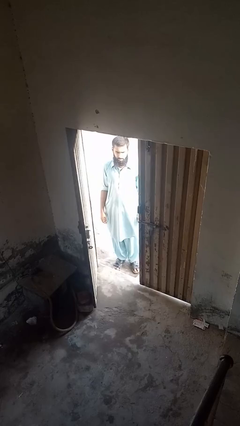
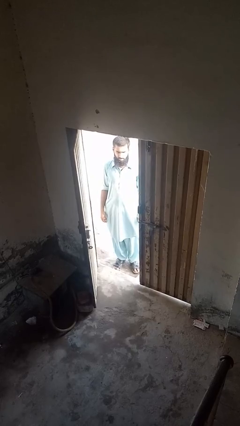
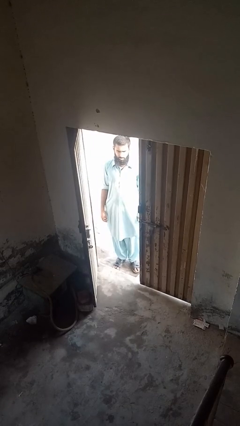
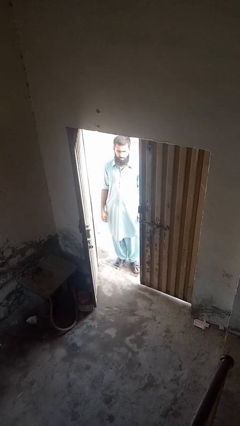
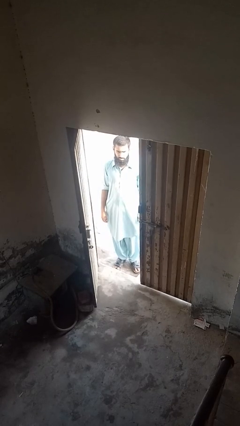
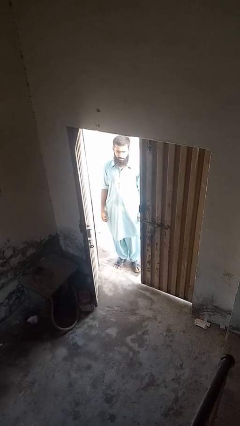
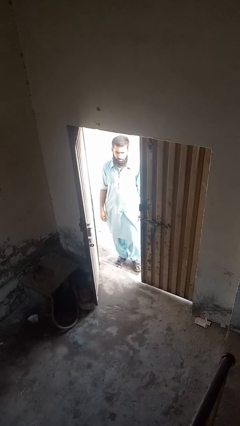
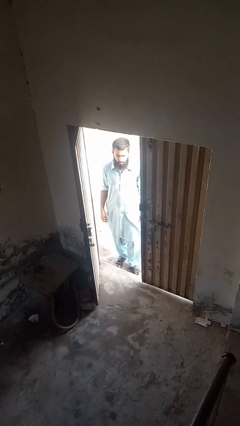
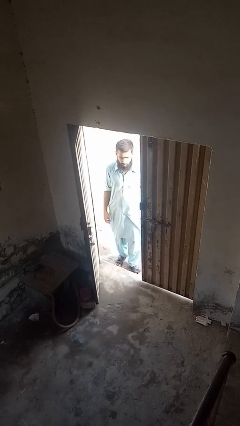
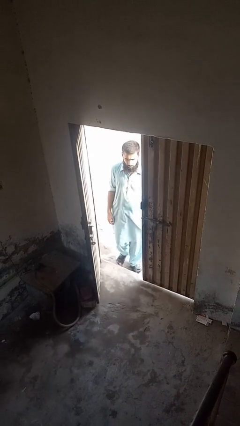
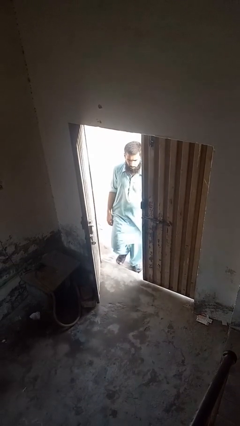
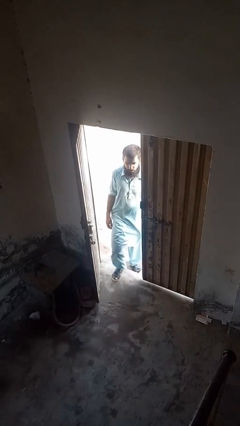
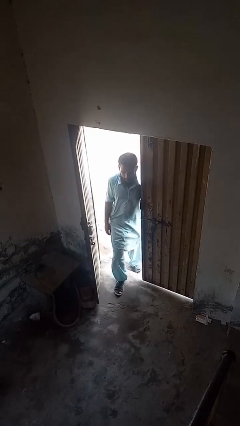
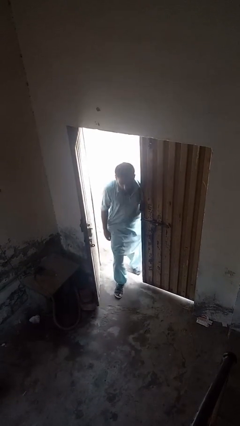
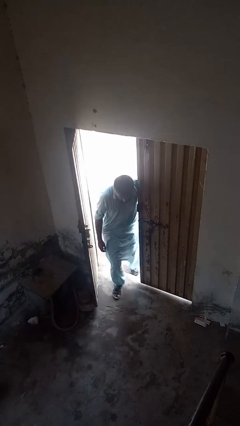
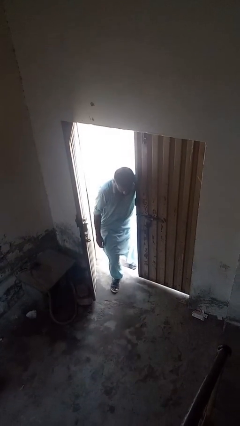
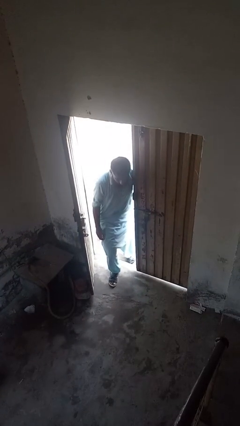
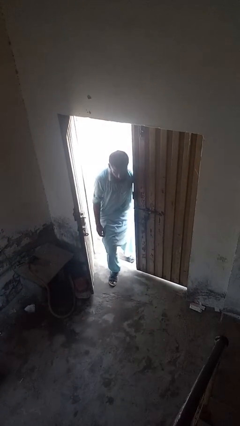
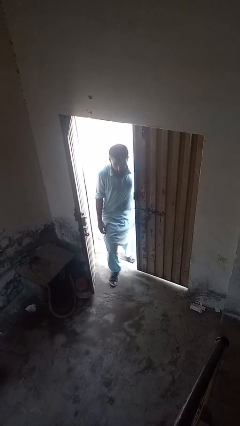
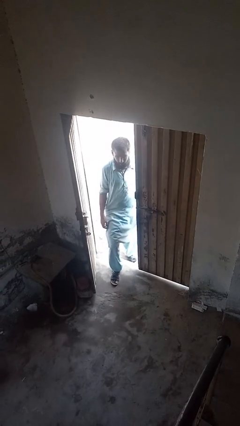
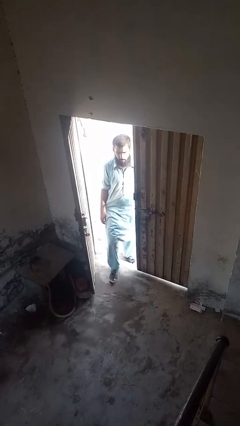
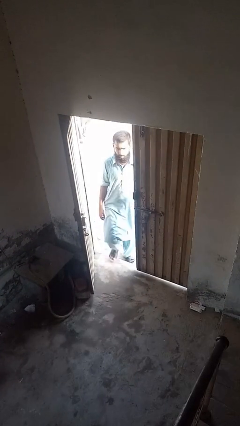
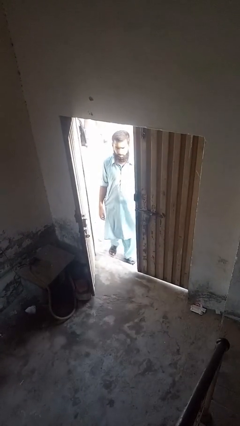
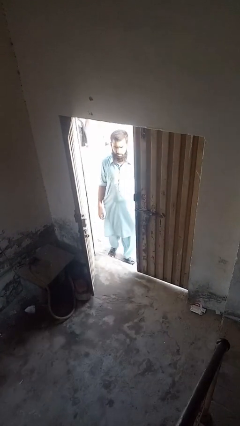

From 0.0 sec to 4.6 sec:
person bumps into wall

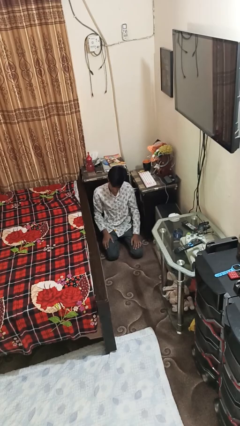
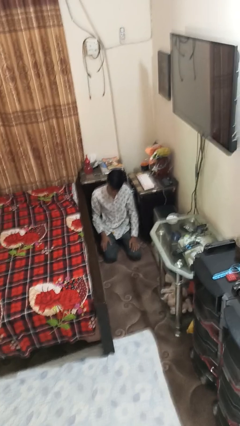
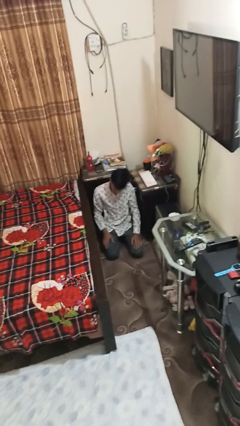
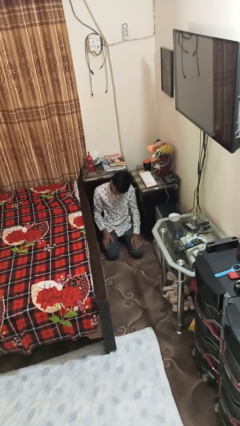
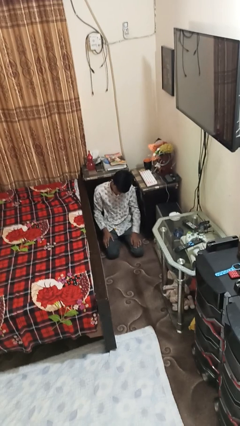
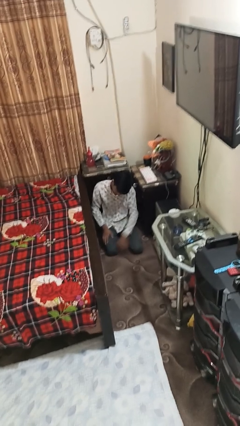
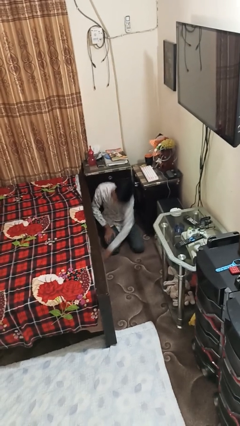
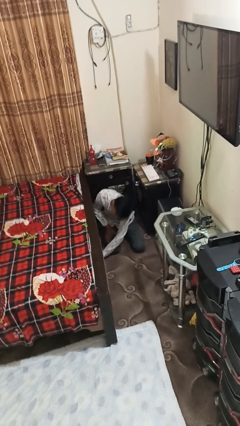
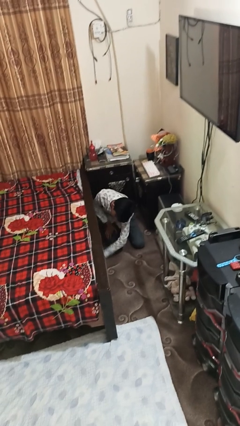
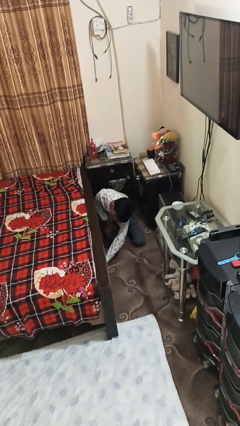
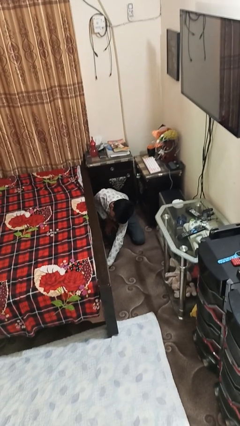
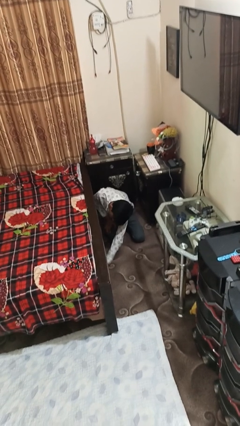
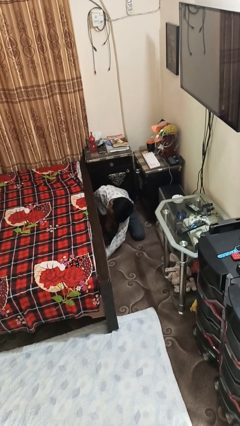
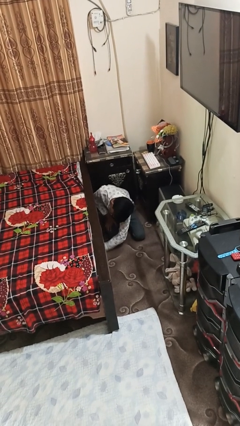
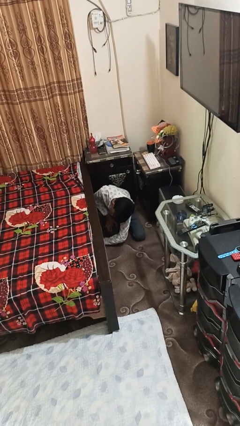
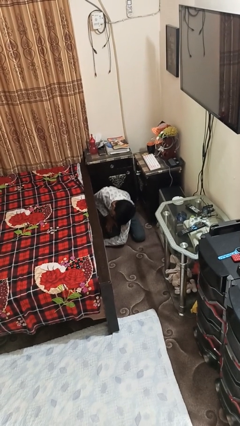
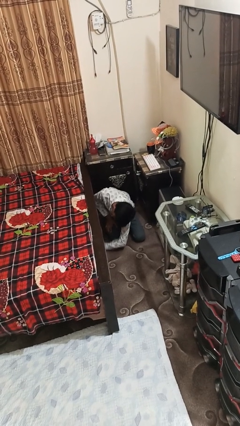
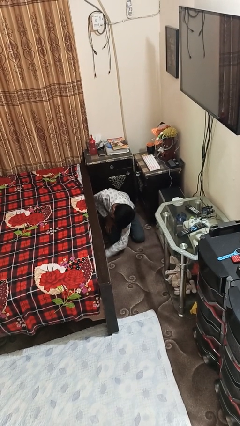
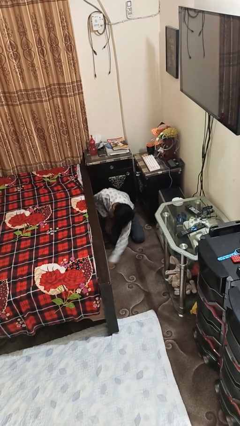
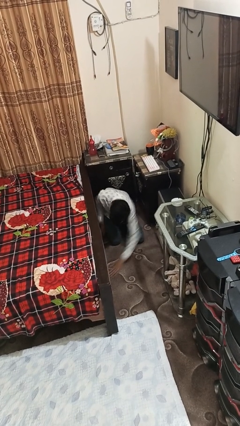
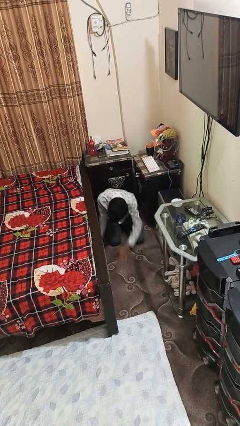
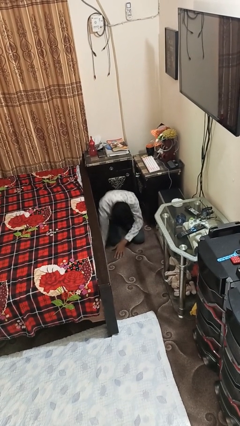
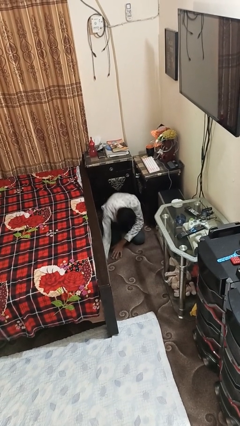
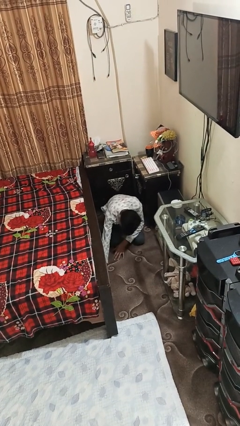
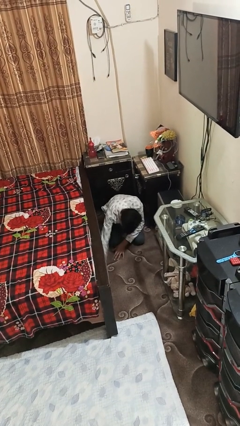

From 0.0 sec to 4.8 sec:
person searches under bed

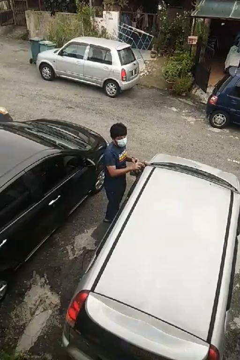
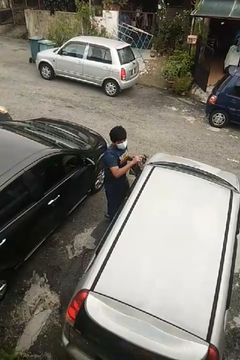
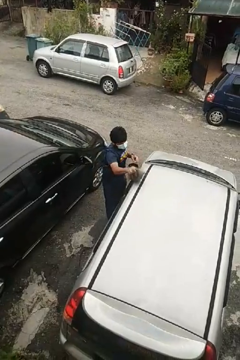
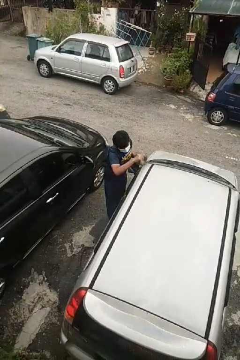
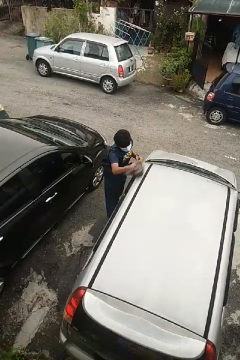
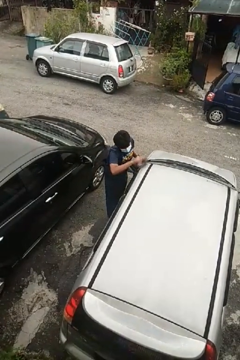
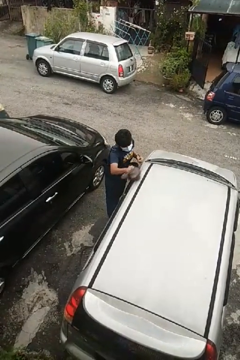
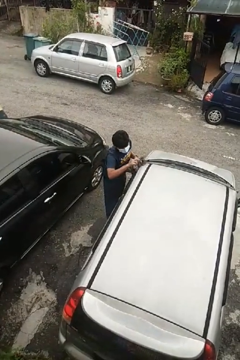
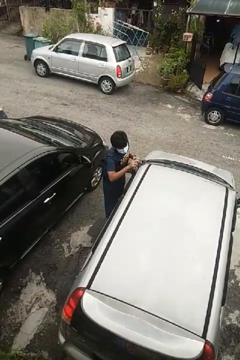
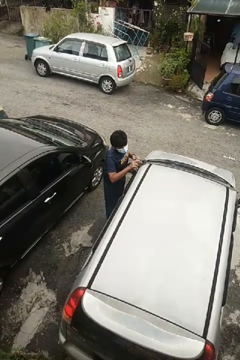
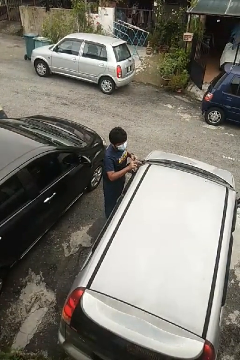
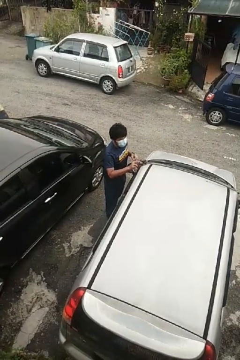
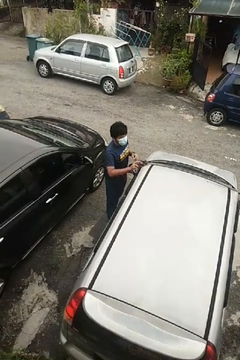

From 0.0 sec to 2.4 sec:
person polishes car with rag

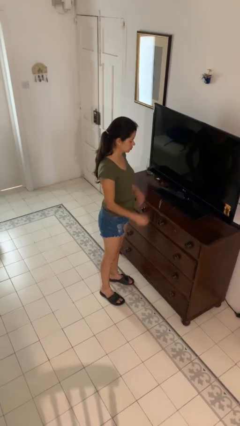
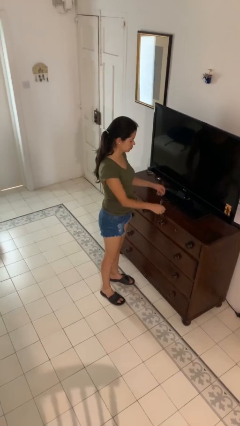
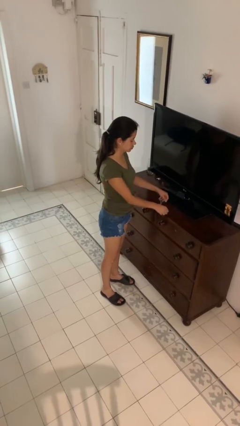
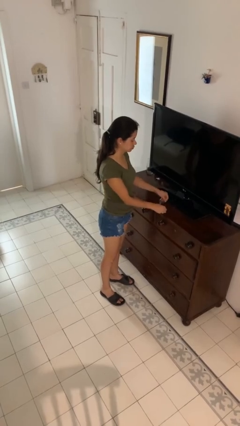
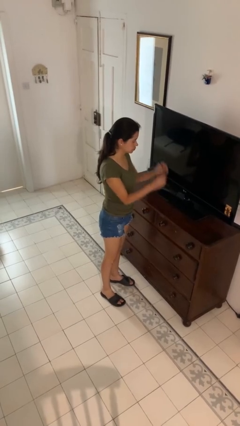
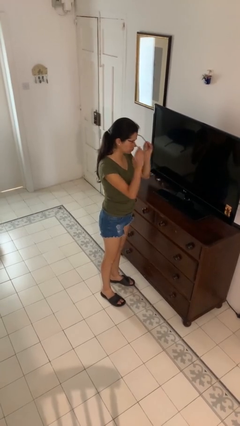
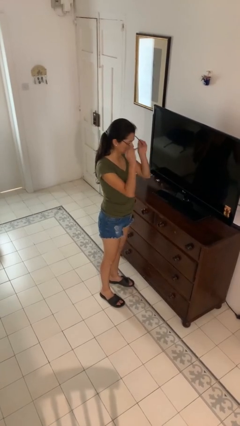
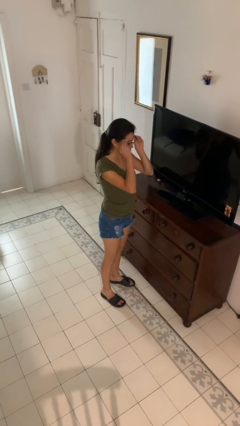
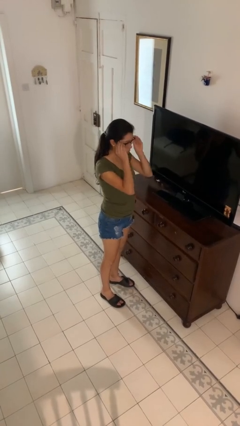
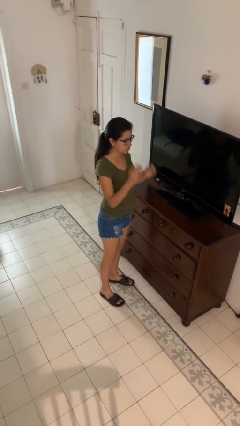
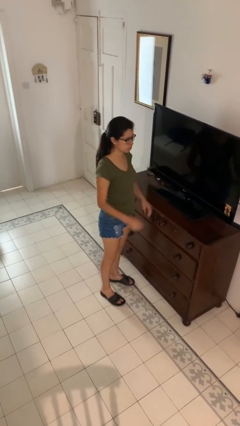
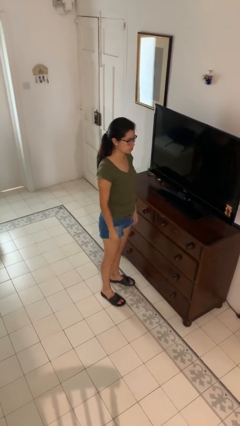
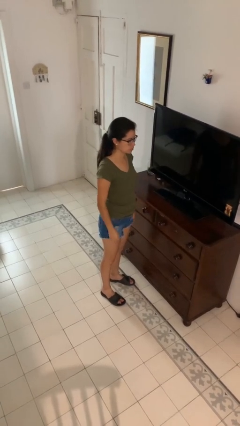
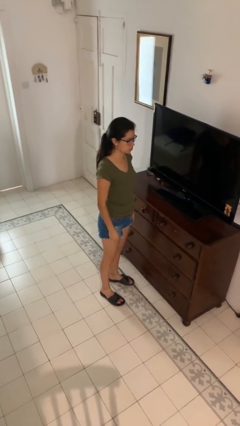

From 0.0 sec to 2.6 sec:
person puts on glasses

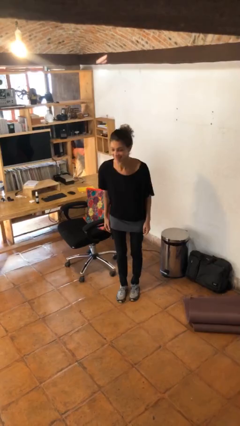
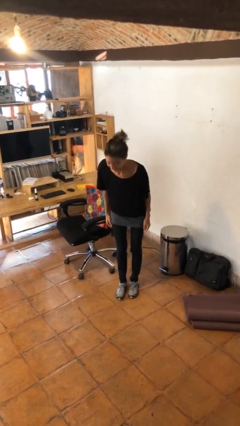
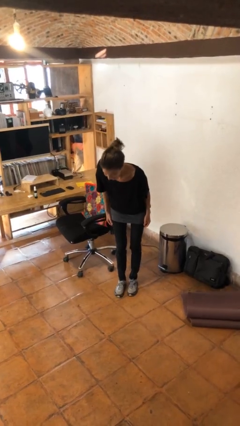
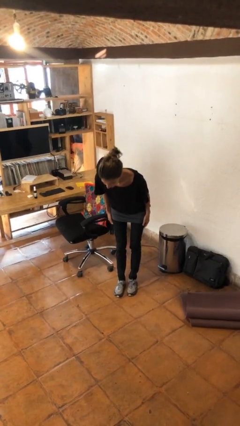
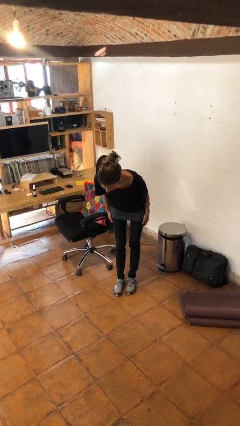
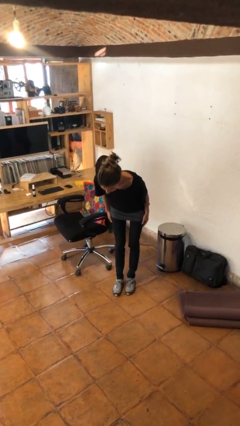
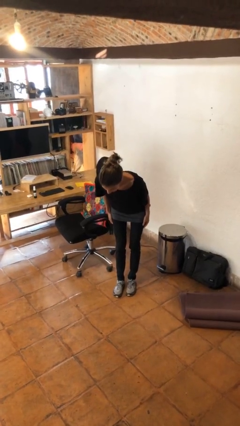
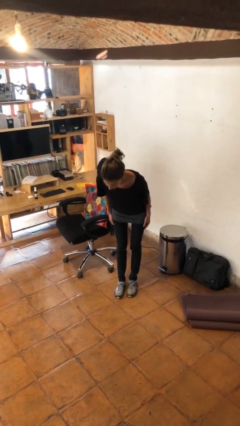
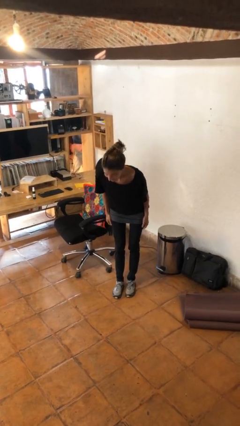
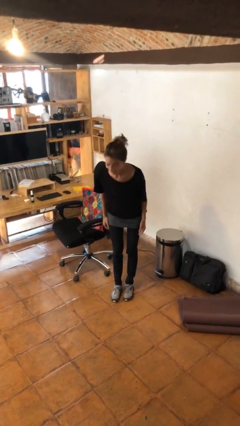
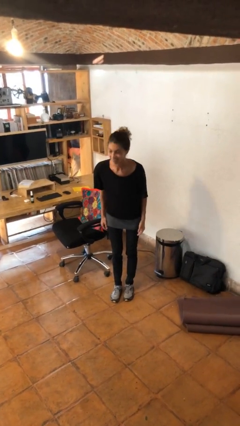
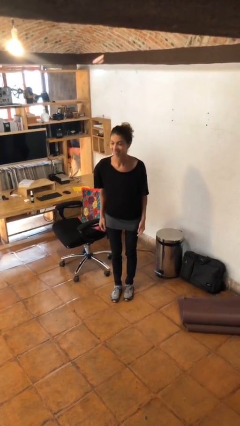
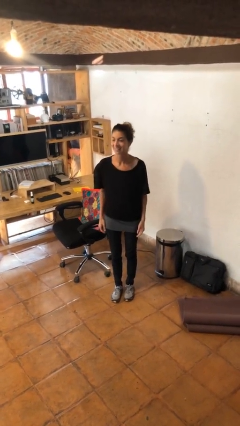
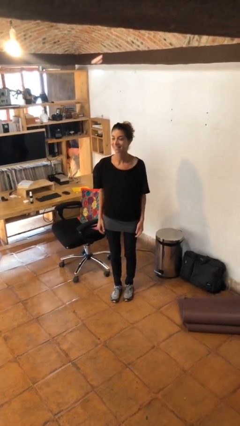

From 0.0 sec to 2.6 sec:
person bows

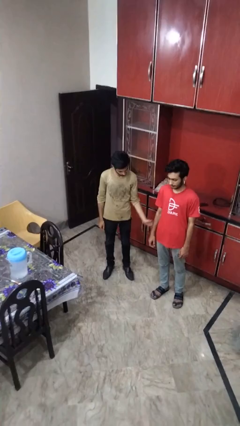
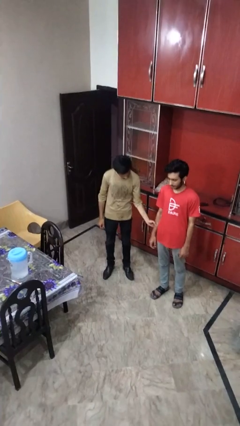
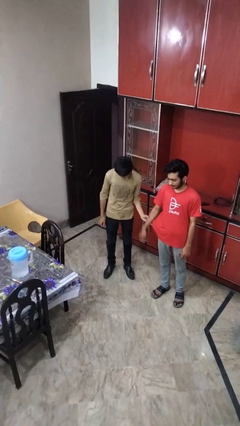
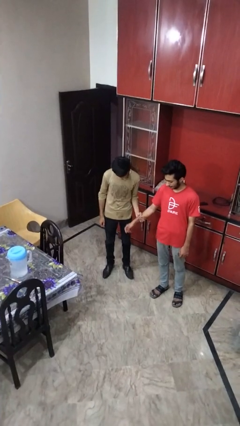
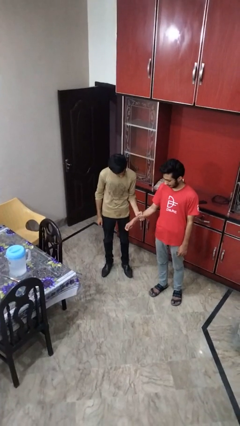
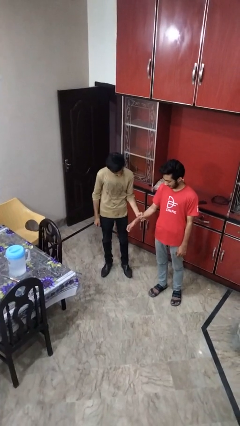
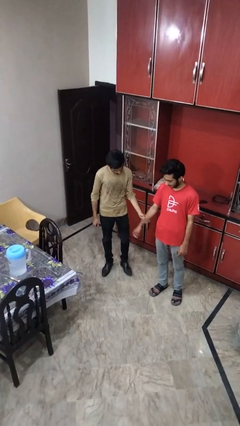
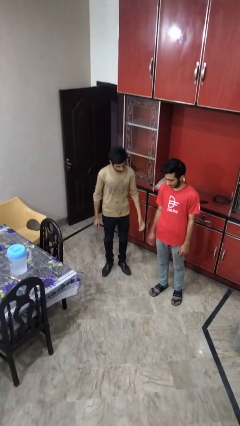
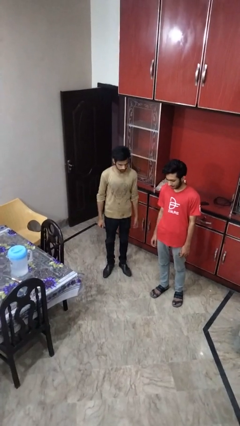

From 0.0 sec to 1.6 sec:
person grabs person by forearm
